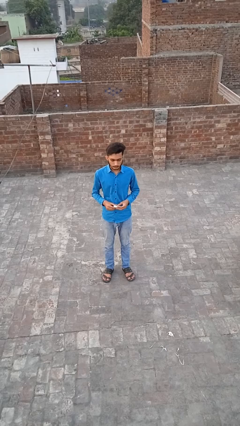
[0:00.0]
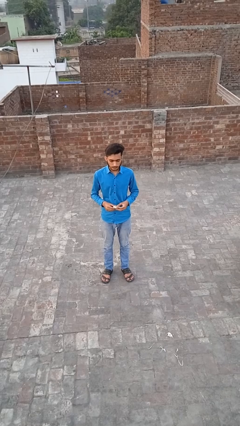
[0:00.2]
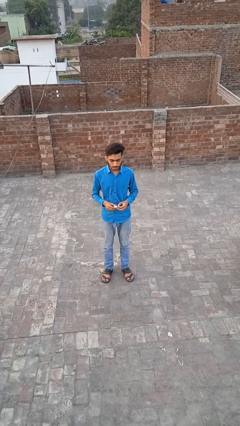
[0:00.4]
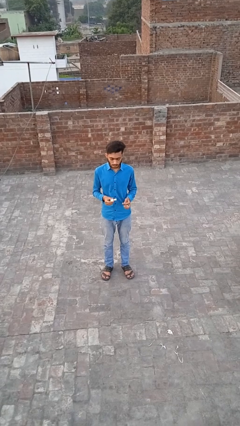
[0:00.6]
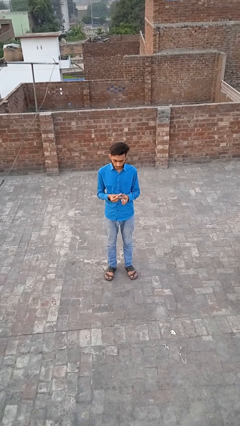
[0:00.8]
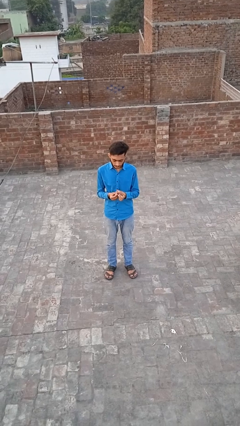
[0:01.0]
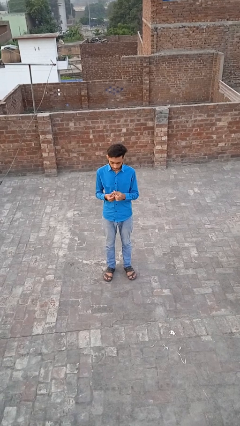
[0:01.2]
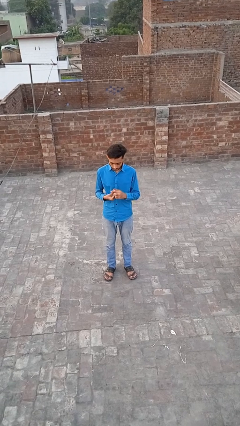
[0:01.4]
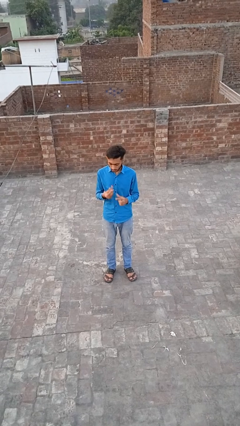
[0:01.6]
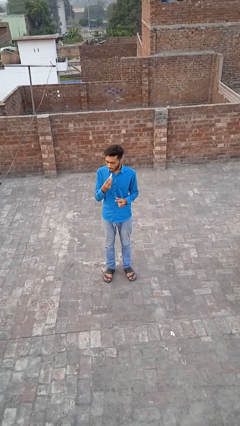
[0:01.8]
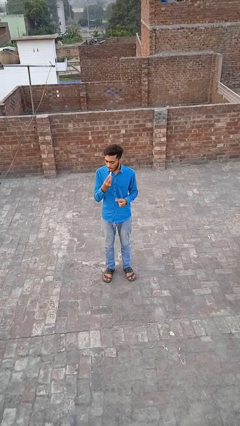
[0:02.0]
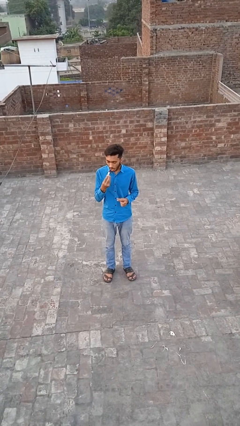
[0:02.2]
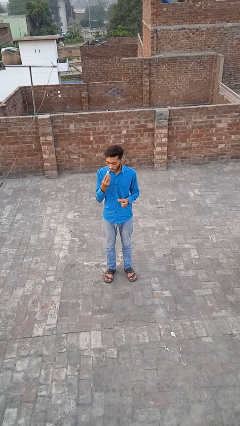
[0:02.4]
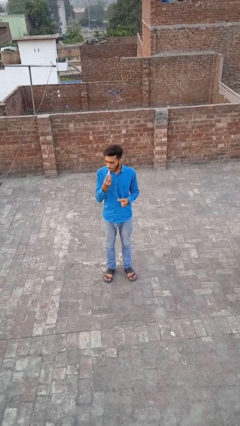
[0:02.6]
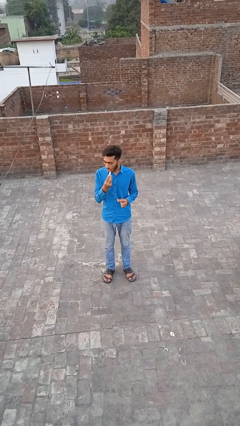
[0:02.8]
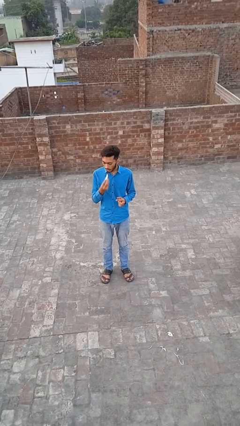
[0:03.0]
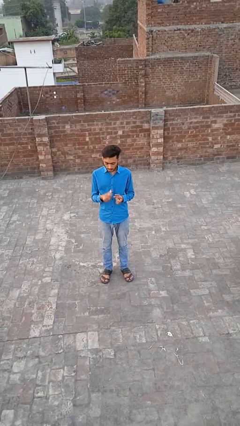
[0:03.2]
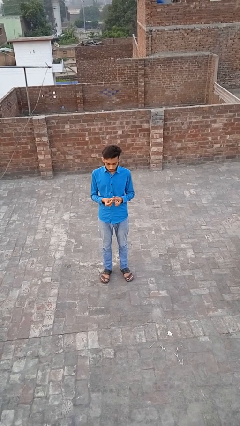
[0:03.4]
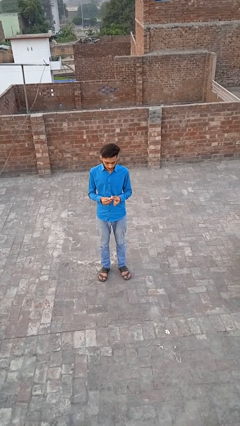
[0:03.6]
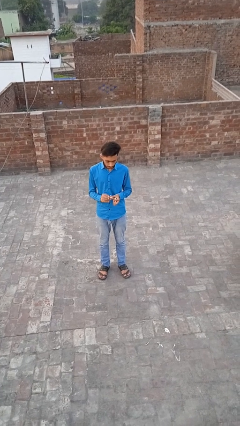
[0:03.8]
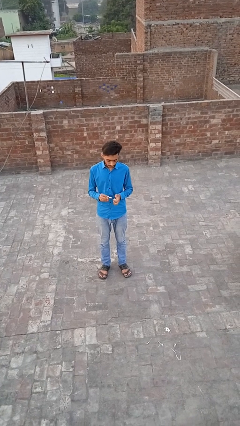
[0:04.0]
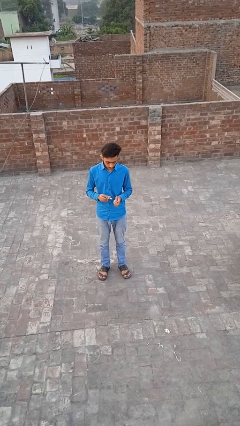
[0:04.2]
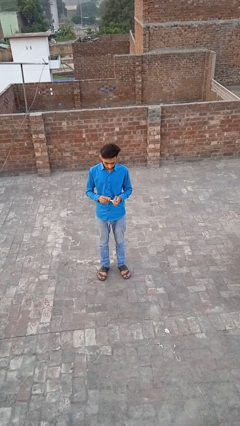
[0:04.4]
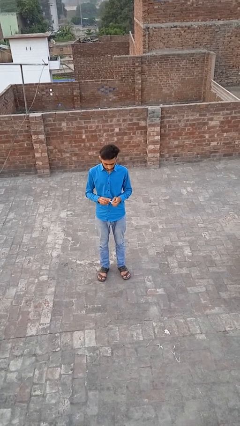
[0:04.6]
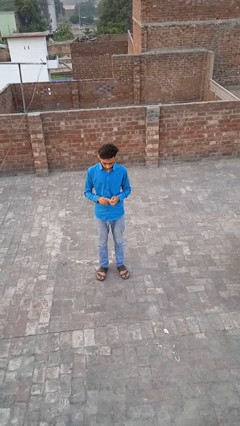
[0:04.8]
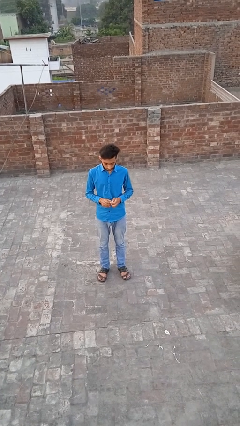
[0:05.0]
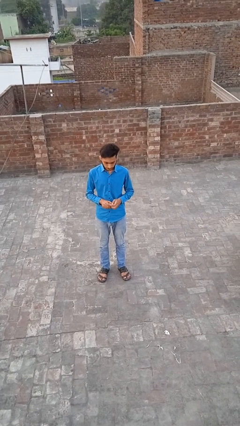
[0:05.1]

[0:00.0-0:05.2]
person applies lip makeup

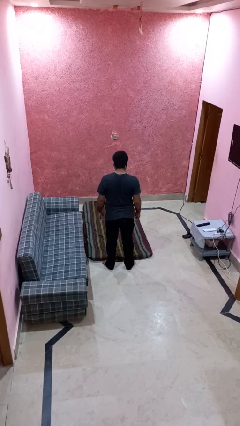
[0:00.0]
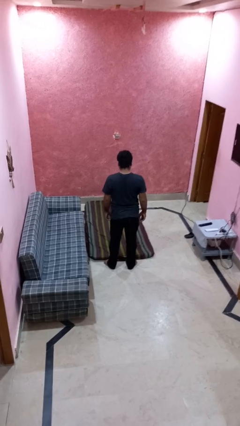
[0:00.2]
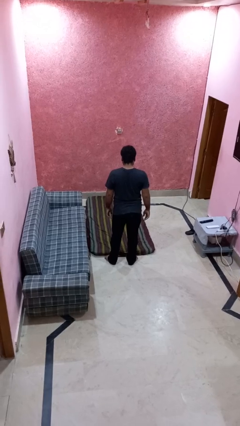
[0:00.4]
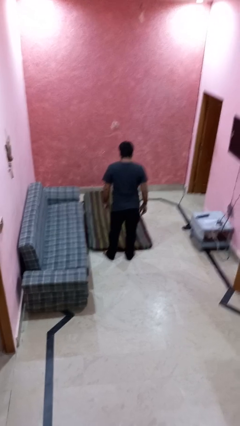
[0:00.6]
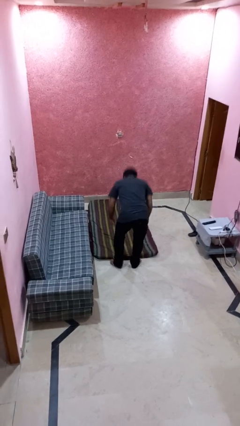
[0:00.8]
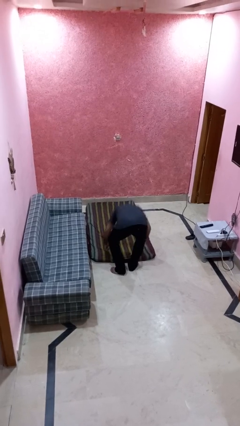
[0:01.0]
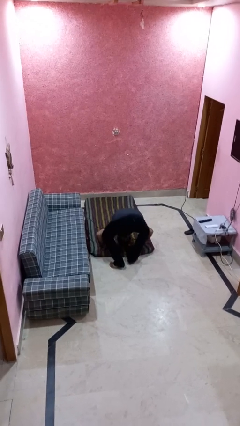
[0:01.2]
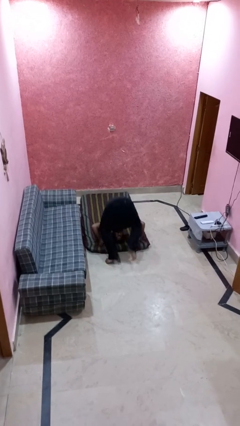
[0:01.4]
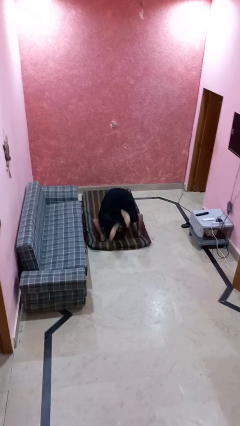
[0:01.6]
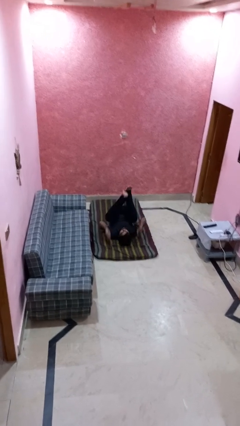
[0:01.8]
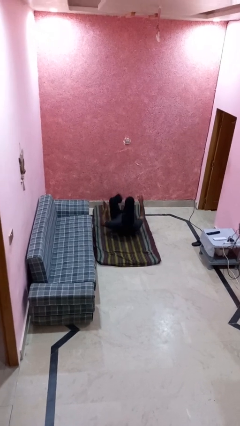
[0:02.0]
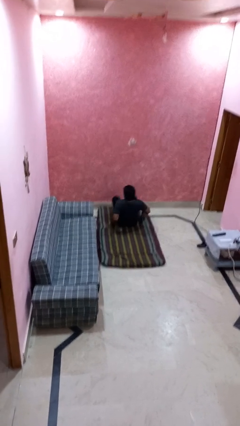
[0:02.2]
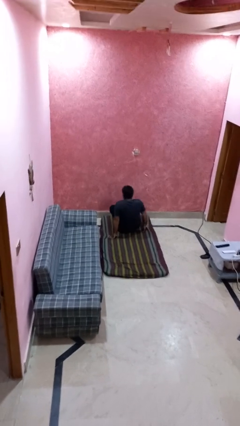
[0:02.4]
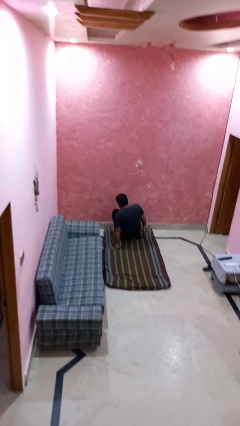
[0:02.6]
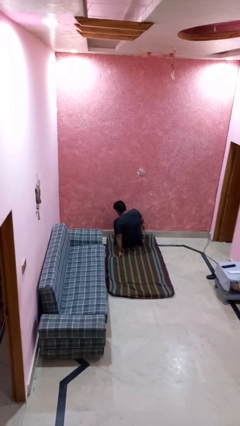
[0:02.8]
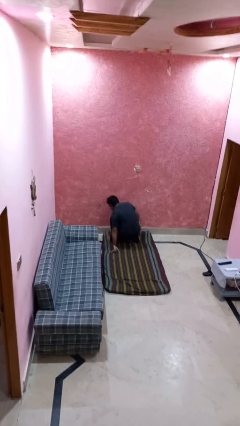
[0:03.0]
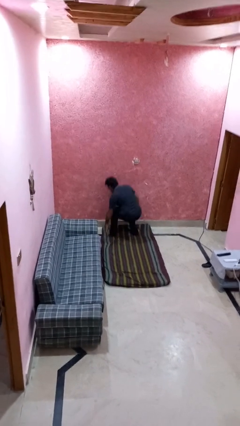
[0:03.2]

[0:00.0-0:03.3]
person somersaults

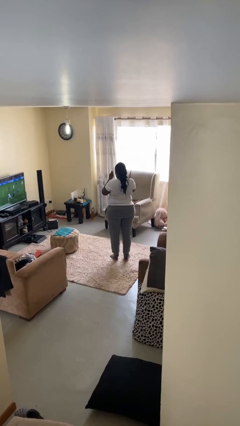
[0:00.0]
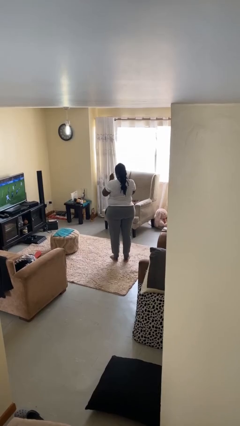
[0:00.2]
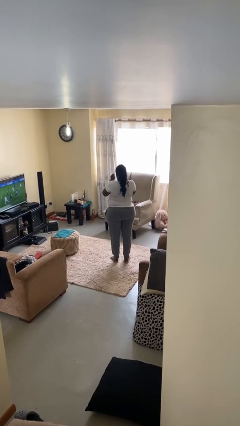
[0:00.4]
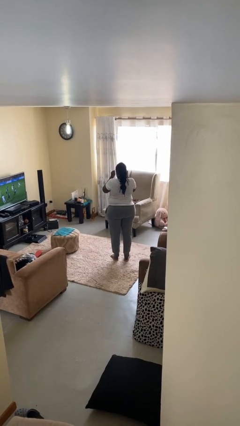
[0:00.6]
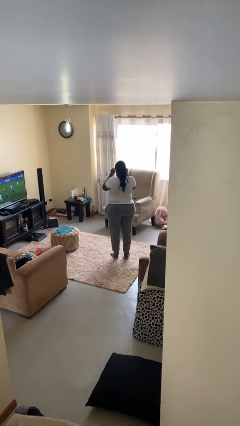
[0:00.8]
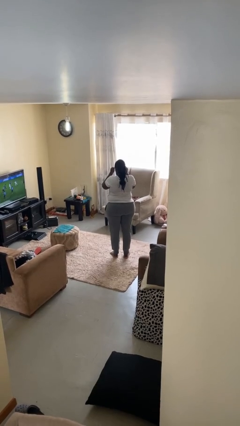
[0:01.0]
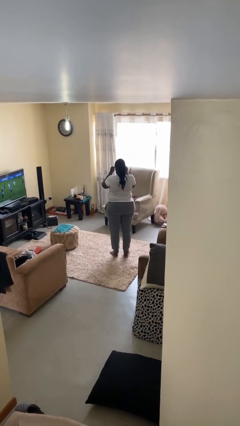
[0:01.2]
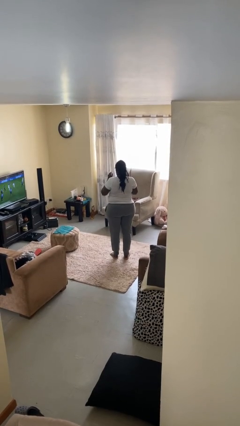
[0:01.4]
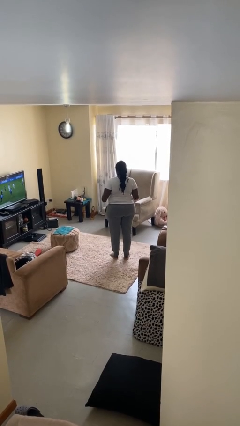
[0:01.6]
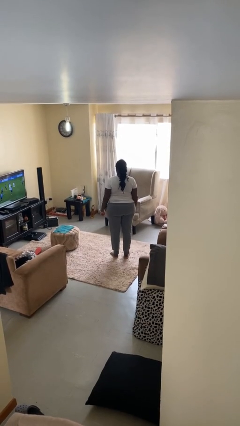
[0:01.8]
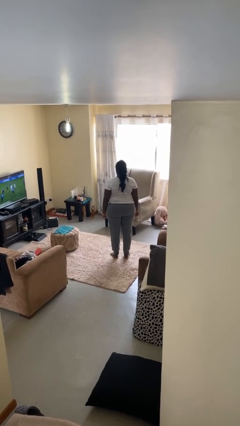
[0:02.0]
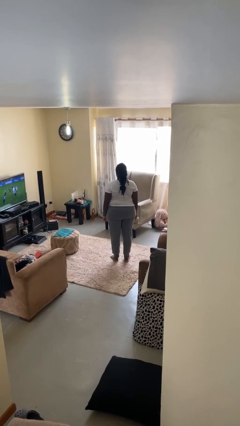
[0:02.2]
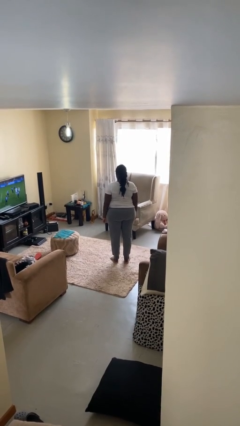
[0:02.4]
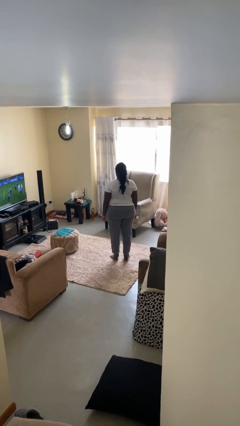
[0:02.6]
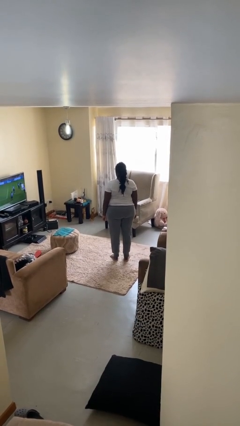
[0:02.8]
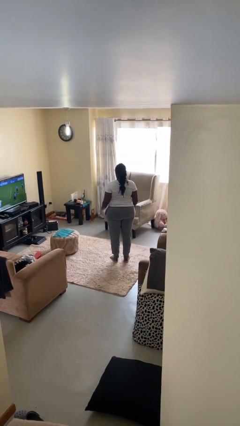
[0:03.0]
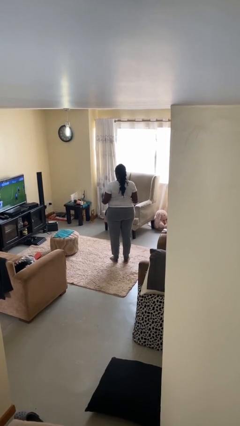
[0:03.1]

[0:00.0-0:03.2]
person puts on glasses

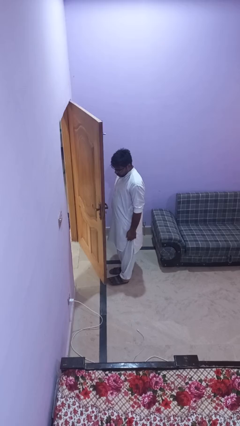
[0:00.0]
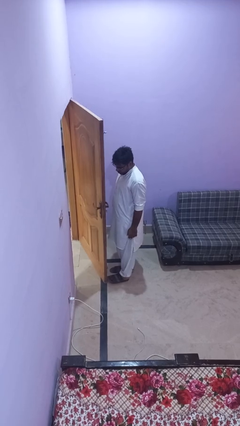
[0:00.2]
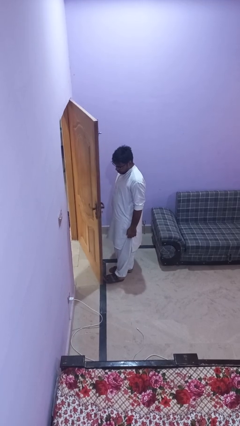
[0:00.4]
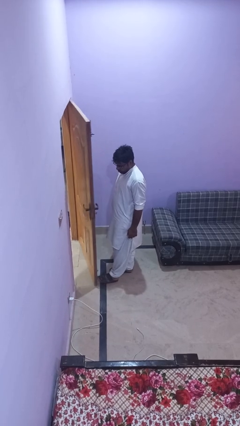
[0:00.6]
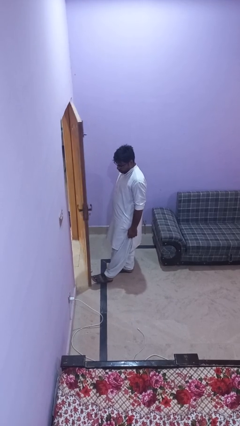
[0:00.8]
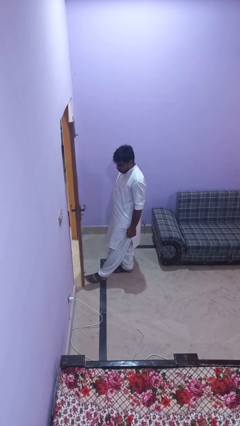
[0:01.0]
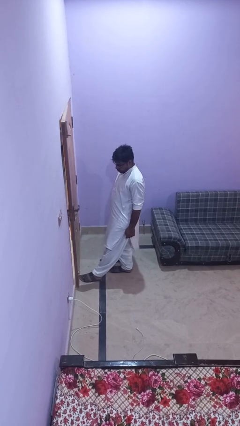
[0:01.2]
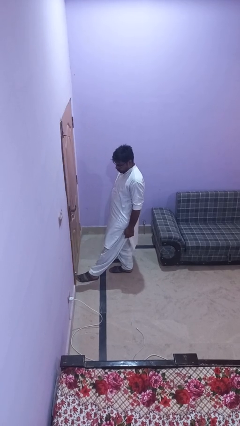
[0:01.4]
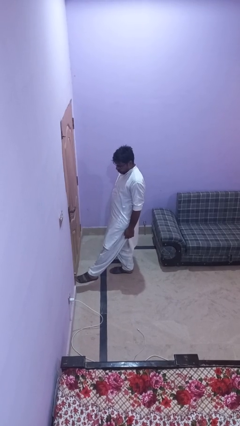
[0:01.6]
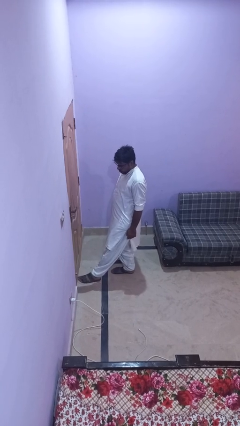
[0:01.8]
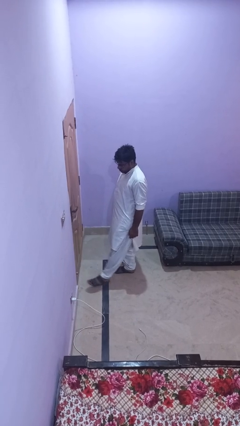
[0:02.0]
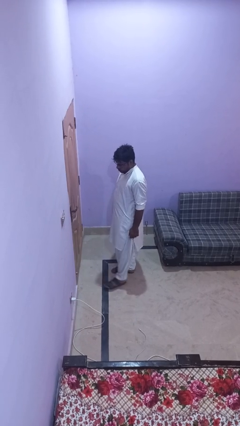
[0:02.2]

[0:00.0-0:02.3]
person closes door with foot

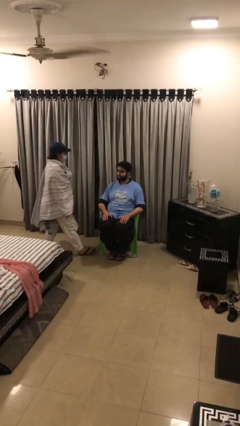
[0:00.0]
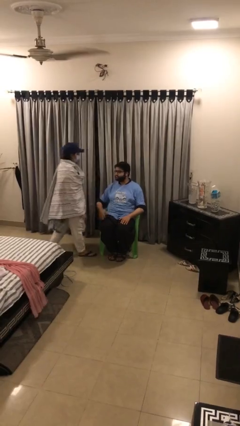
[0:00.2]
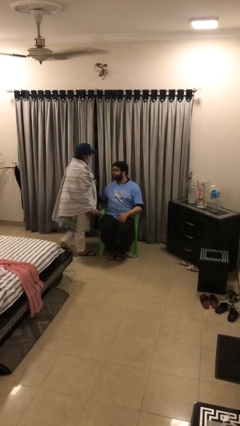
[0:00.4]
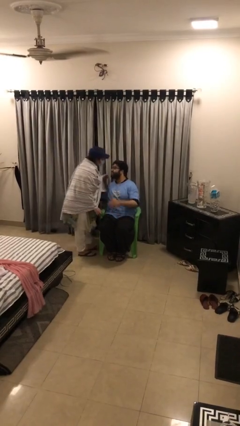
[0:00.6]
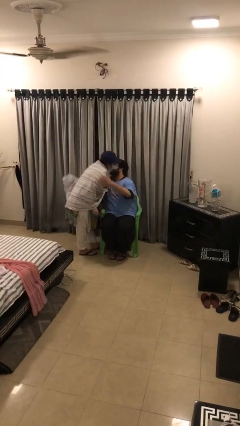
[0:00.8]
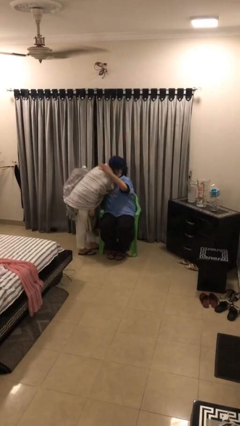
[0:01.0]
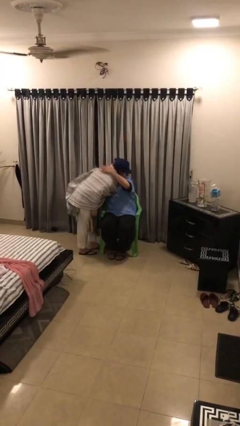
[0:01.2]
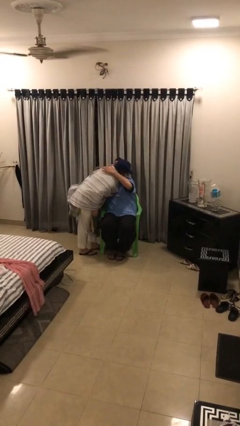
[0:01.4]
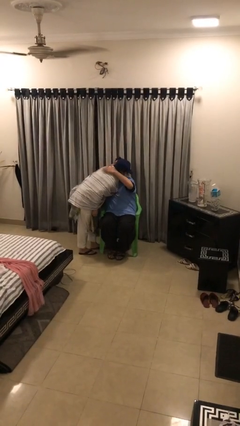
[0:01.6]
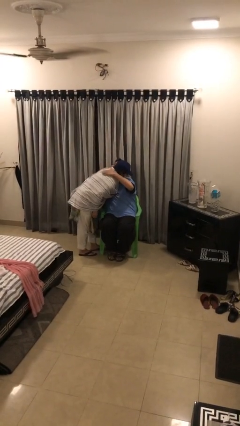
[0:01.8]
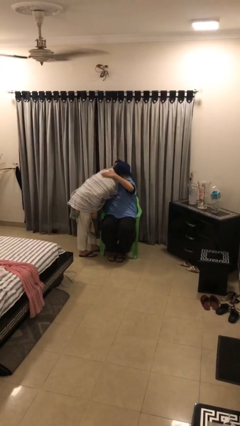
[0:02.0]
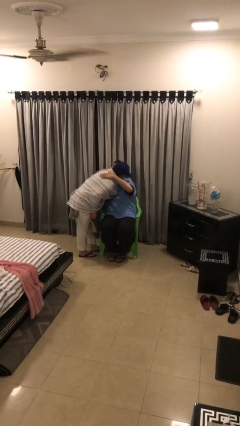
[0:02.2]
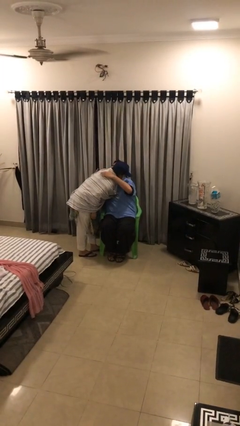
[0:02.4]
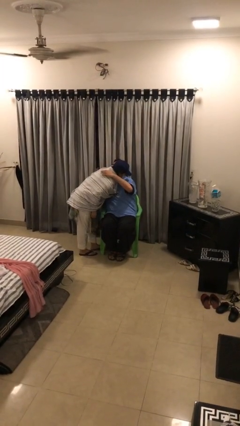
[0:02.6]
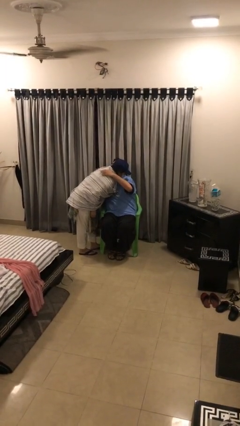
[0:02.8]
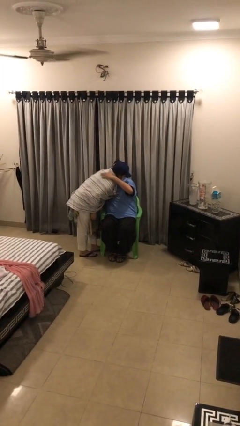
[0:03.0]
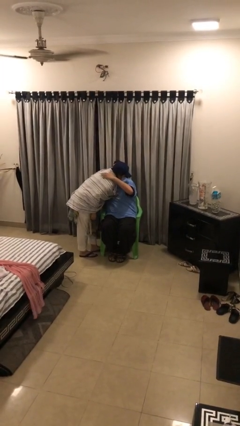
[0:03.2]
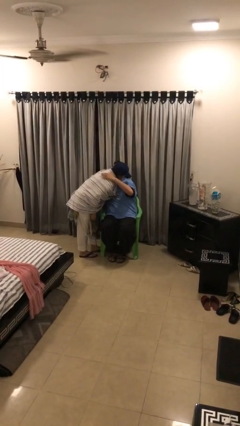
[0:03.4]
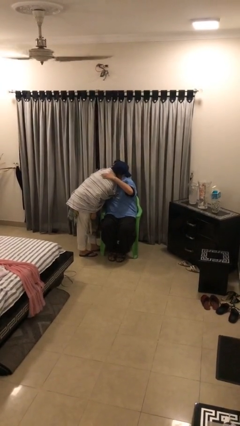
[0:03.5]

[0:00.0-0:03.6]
person embraces person
